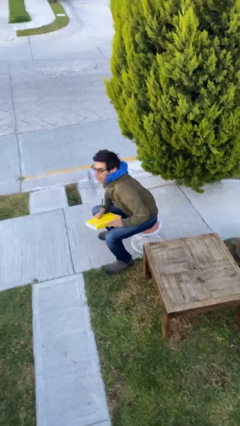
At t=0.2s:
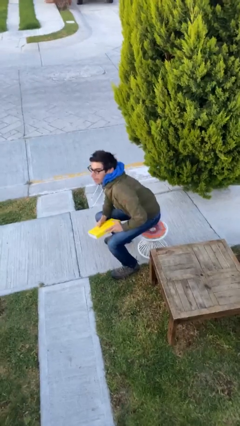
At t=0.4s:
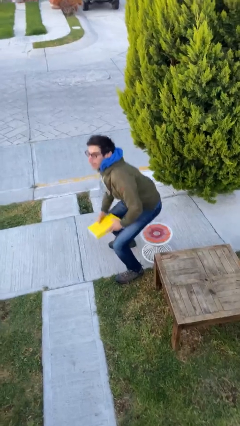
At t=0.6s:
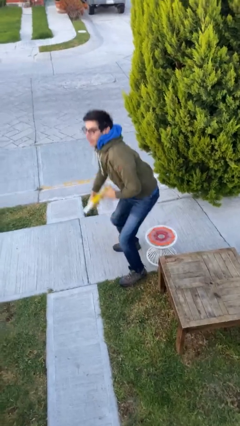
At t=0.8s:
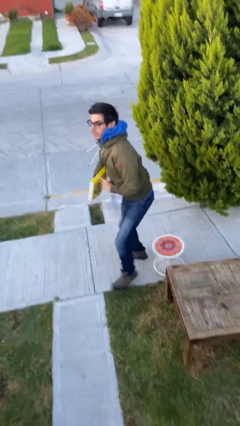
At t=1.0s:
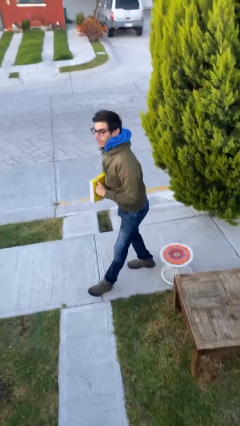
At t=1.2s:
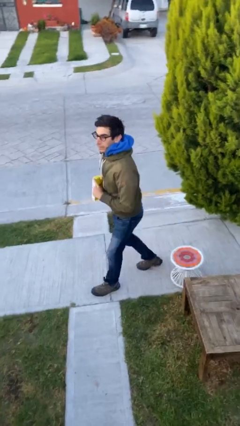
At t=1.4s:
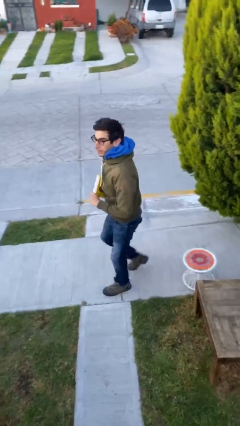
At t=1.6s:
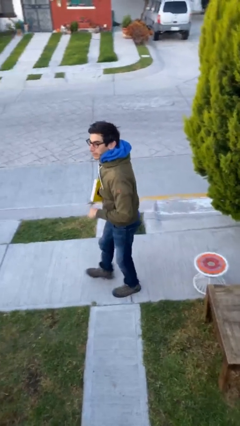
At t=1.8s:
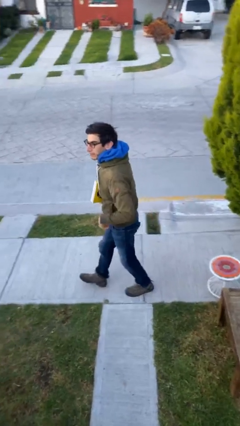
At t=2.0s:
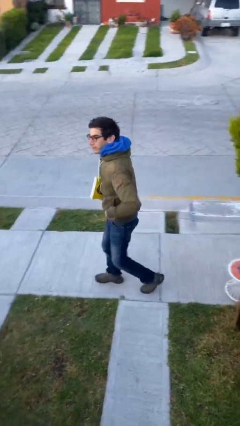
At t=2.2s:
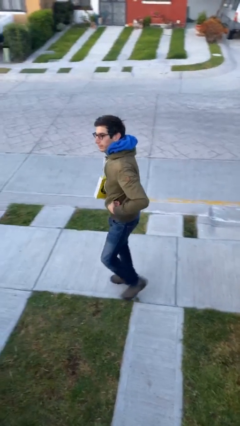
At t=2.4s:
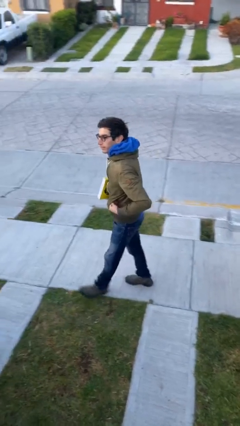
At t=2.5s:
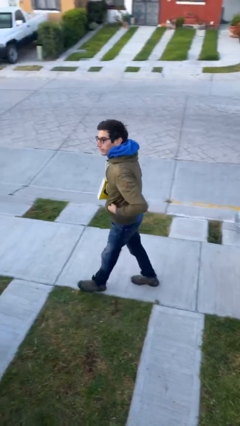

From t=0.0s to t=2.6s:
person stands up

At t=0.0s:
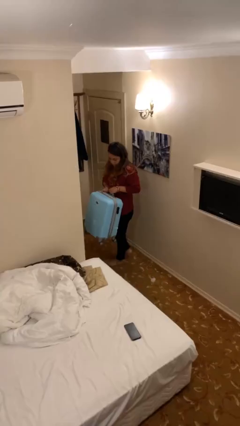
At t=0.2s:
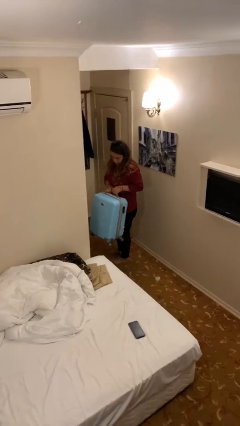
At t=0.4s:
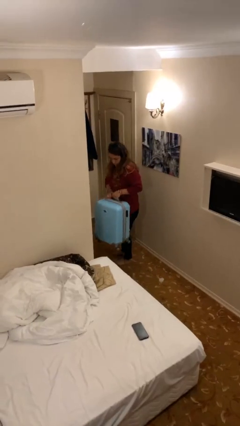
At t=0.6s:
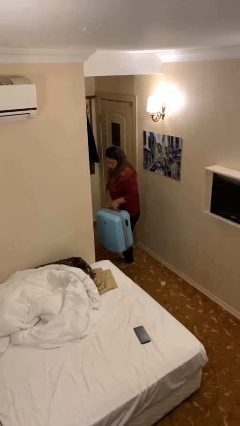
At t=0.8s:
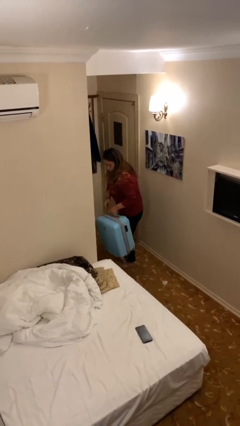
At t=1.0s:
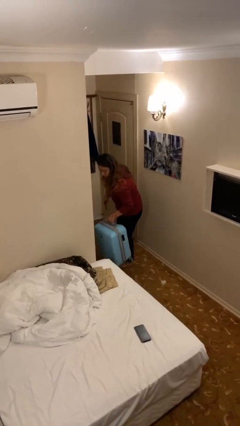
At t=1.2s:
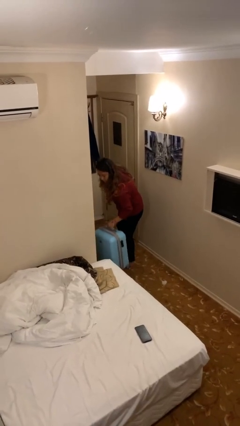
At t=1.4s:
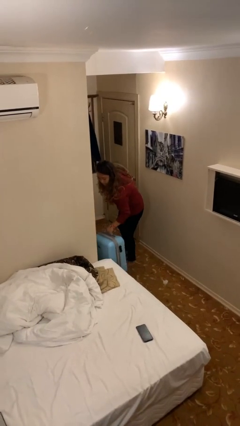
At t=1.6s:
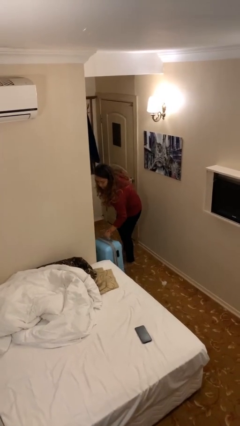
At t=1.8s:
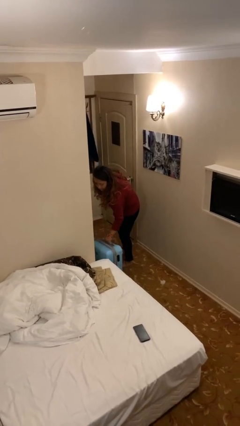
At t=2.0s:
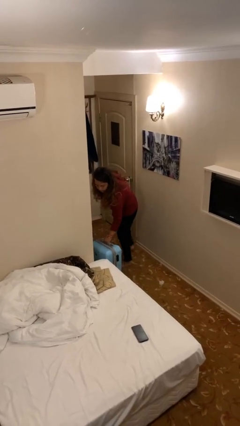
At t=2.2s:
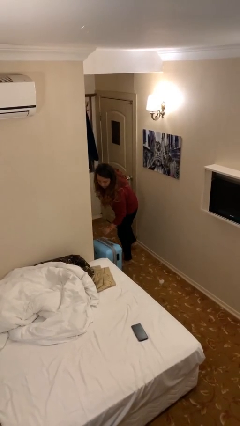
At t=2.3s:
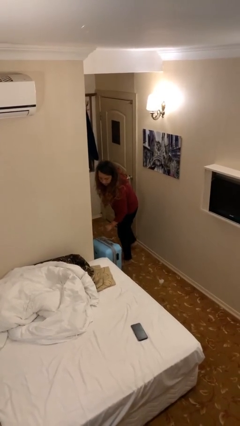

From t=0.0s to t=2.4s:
person puts down object on floor

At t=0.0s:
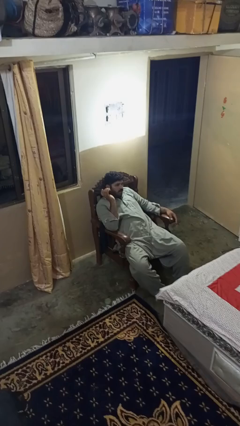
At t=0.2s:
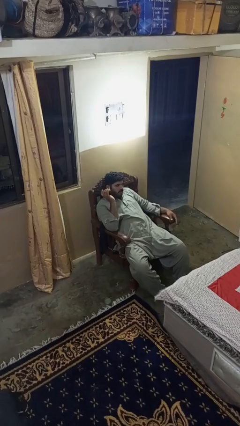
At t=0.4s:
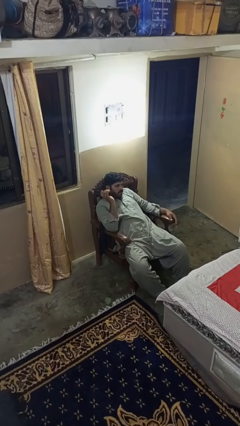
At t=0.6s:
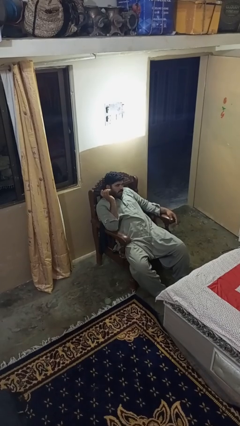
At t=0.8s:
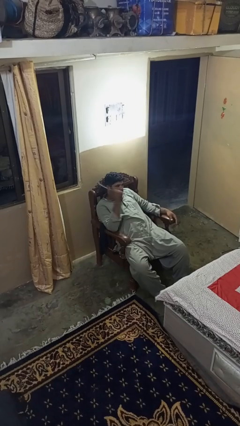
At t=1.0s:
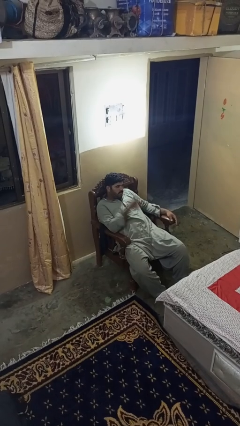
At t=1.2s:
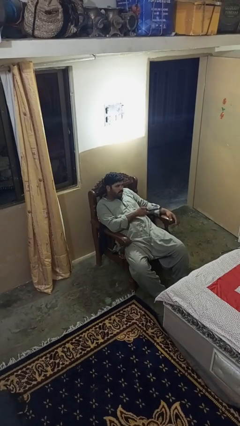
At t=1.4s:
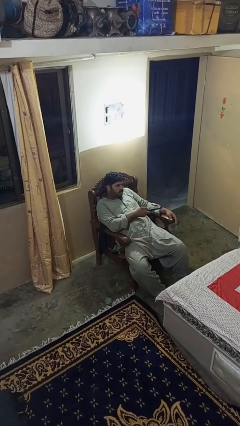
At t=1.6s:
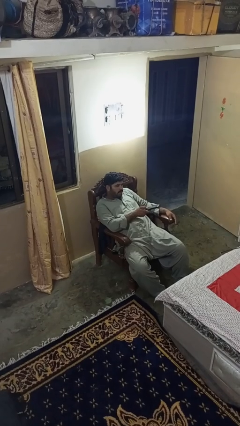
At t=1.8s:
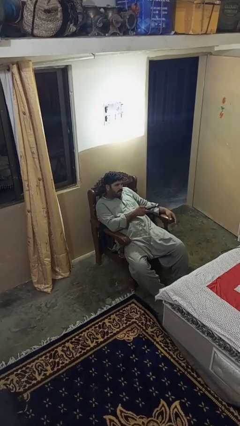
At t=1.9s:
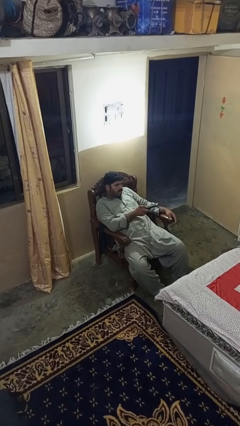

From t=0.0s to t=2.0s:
person uses television remote

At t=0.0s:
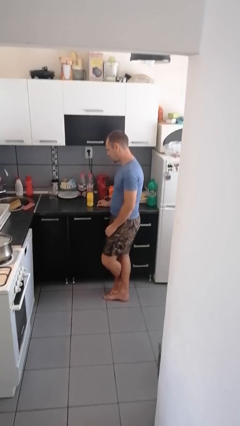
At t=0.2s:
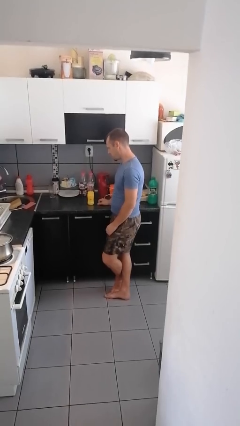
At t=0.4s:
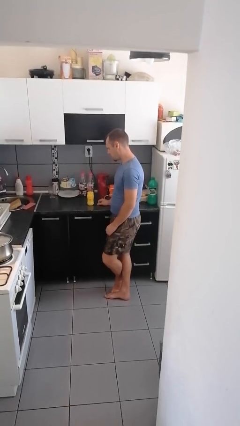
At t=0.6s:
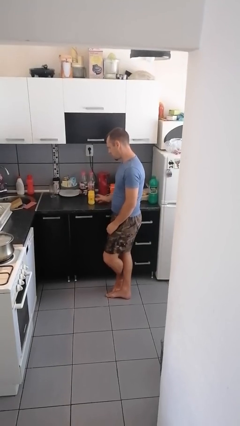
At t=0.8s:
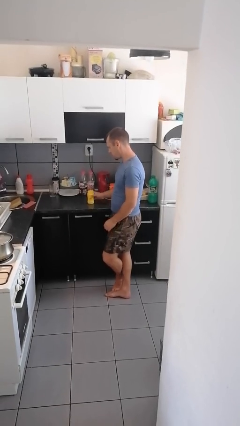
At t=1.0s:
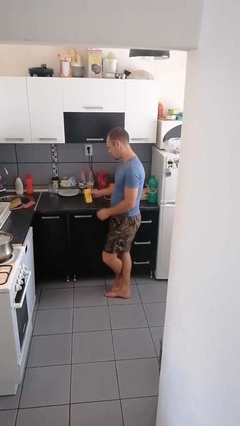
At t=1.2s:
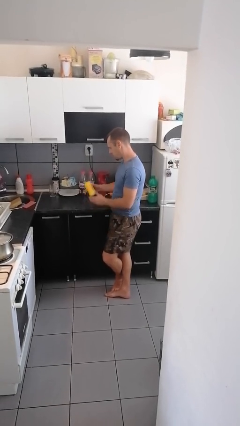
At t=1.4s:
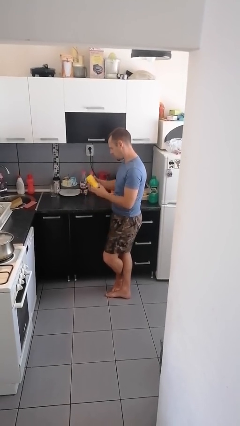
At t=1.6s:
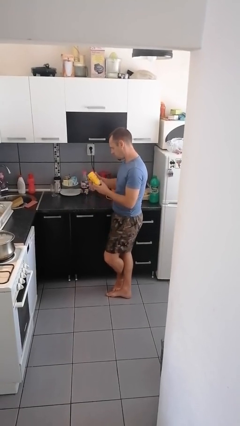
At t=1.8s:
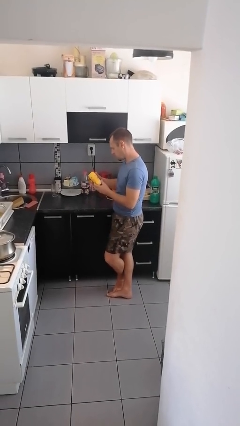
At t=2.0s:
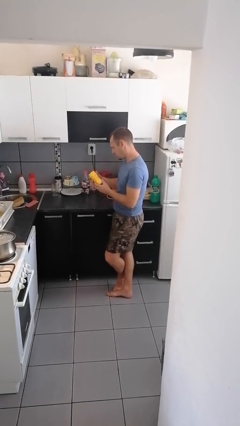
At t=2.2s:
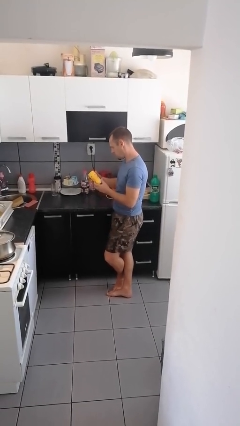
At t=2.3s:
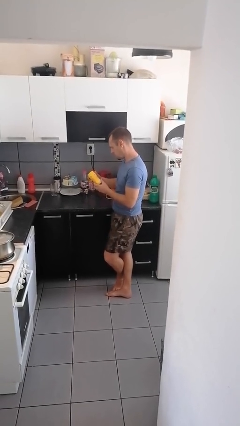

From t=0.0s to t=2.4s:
person picks up object from countertop

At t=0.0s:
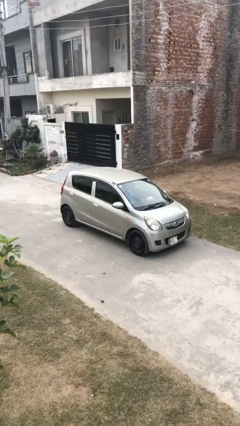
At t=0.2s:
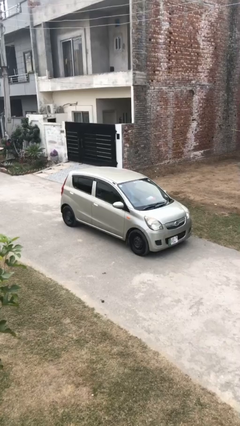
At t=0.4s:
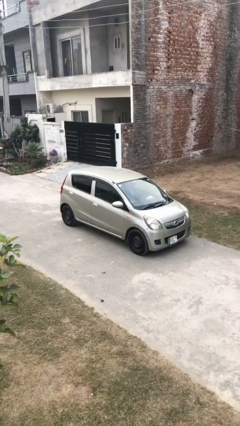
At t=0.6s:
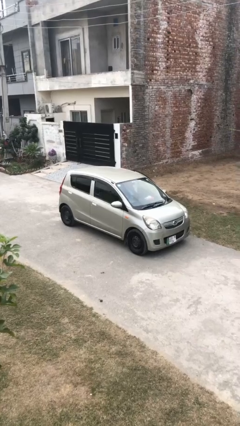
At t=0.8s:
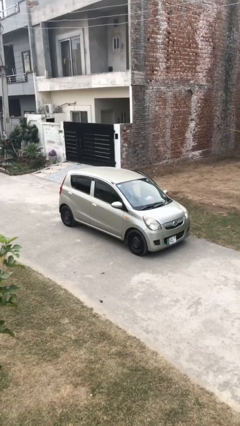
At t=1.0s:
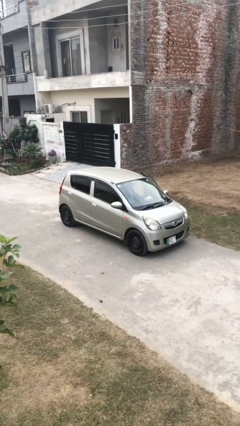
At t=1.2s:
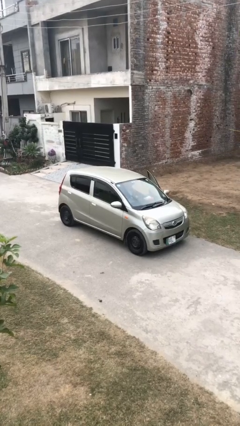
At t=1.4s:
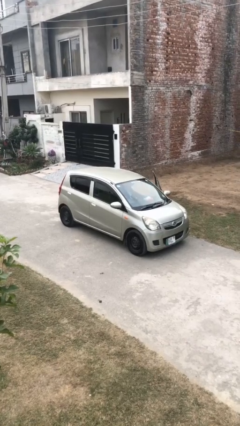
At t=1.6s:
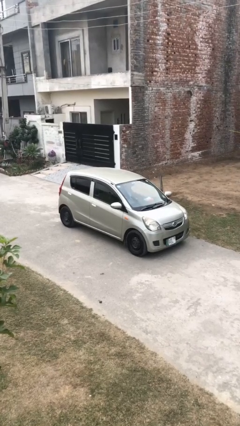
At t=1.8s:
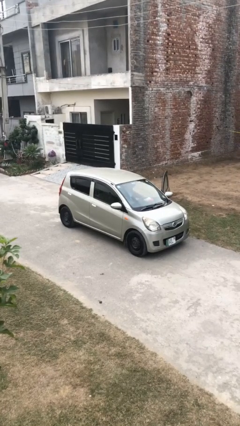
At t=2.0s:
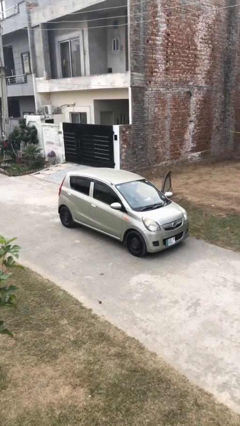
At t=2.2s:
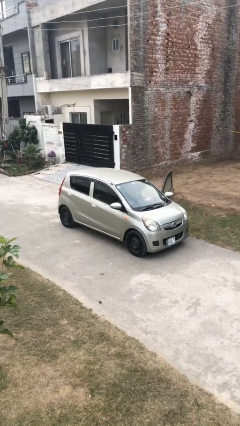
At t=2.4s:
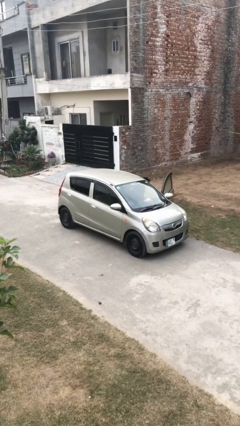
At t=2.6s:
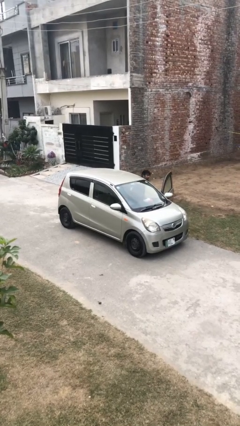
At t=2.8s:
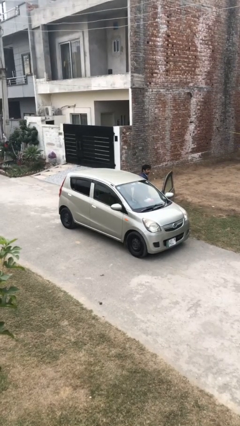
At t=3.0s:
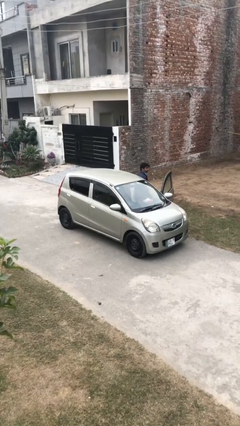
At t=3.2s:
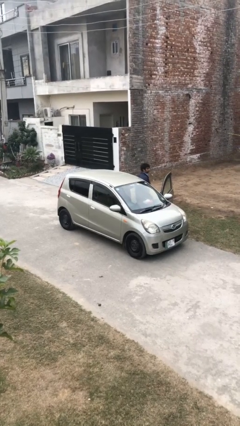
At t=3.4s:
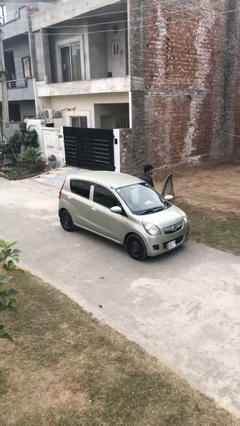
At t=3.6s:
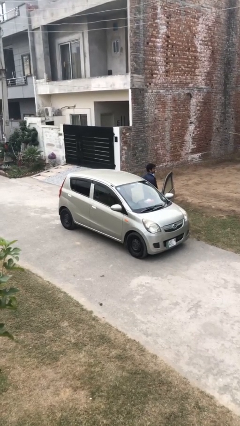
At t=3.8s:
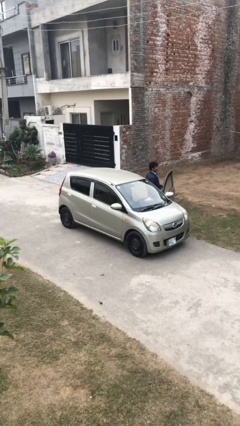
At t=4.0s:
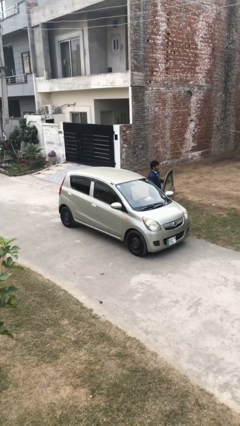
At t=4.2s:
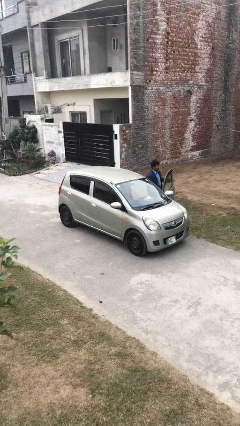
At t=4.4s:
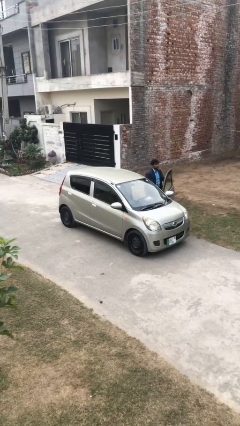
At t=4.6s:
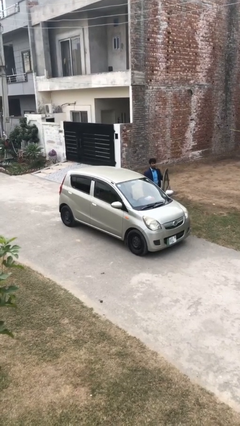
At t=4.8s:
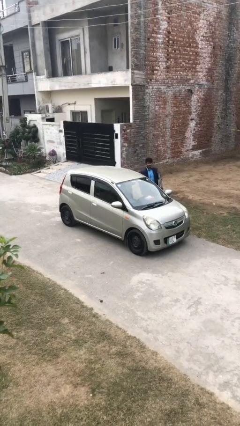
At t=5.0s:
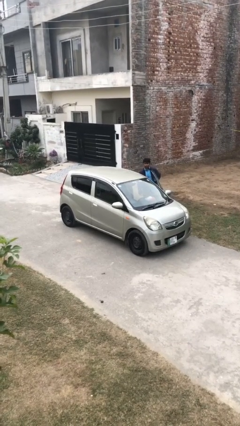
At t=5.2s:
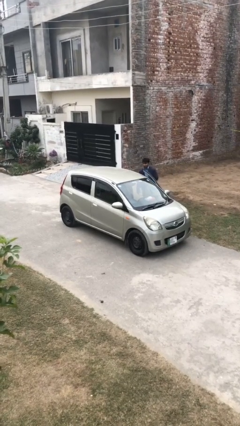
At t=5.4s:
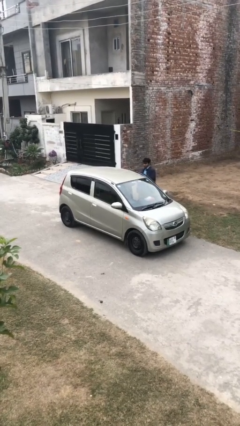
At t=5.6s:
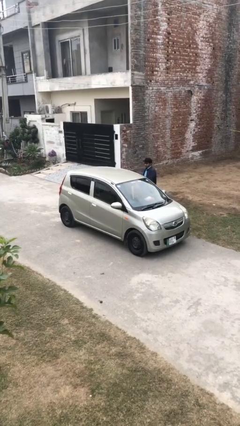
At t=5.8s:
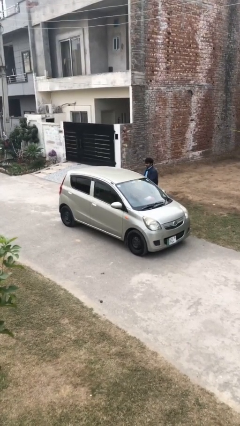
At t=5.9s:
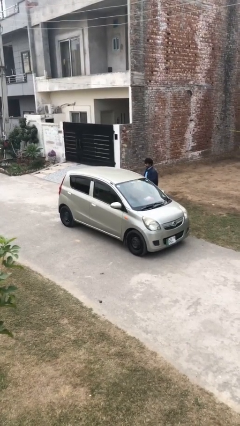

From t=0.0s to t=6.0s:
car drops off person

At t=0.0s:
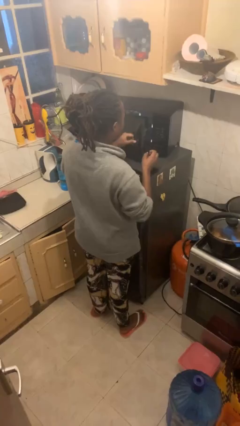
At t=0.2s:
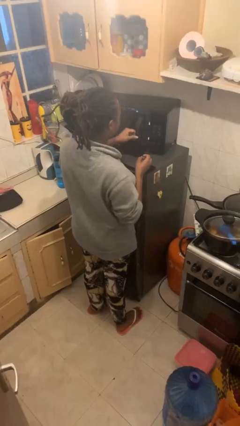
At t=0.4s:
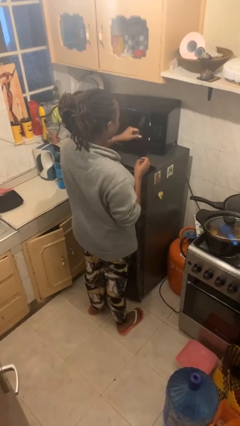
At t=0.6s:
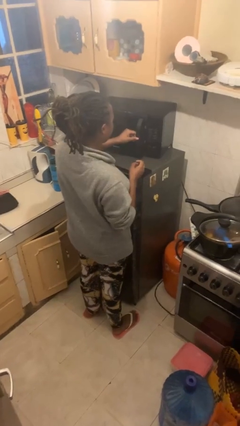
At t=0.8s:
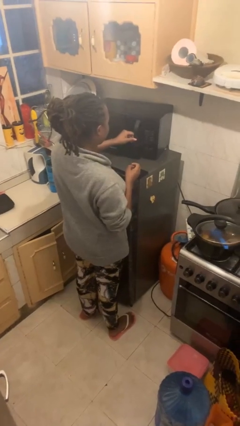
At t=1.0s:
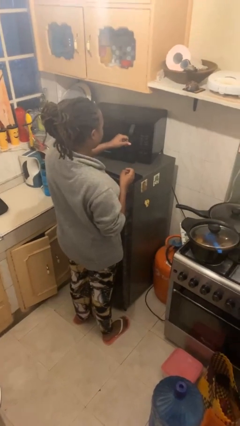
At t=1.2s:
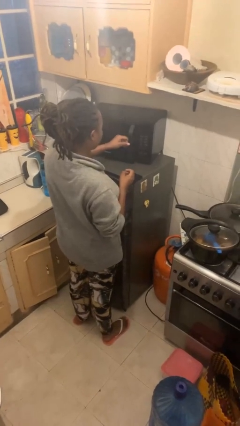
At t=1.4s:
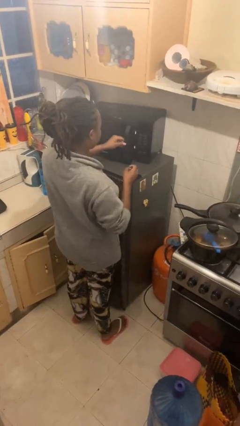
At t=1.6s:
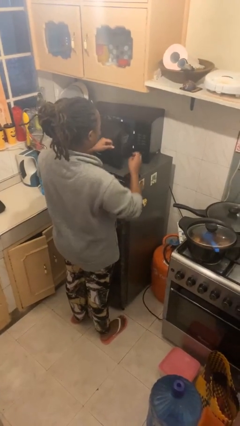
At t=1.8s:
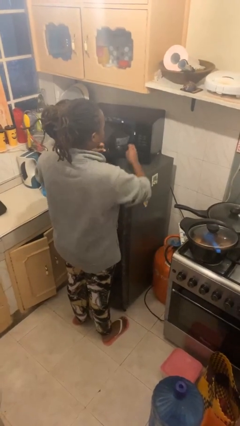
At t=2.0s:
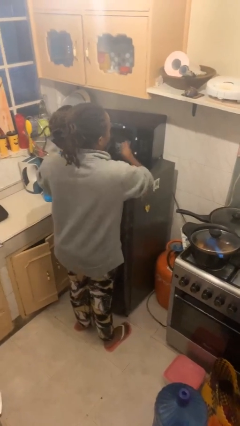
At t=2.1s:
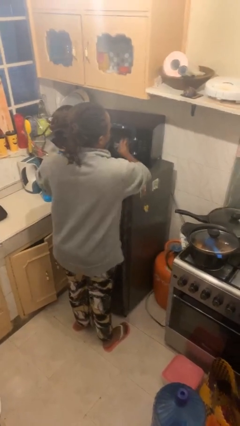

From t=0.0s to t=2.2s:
person closes microwave
